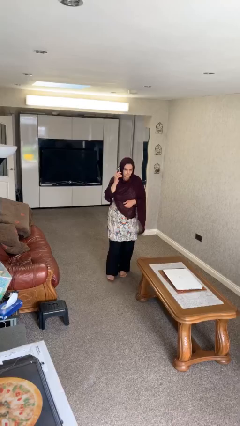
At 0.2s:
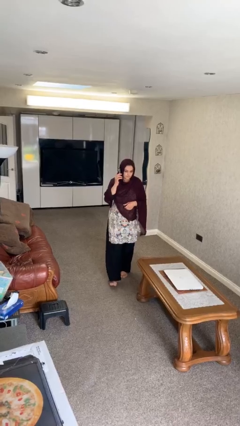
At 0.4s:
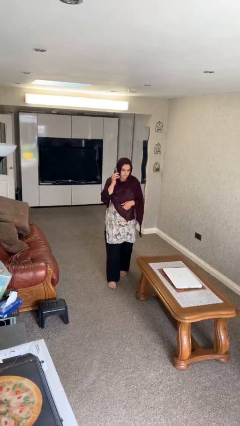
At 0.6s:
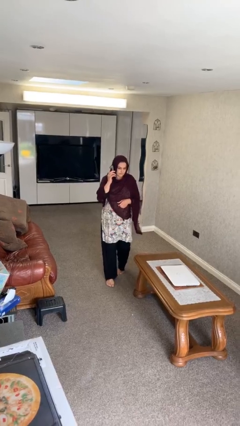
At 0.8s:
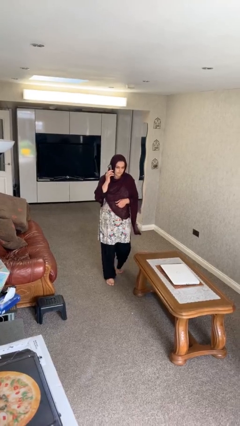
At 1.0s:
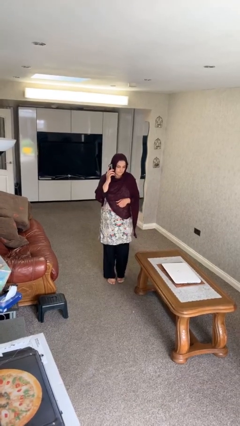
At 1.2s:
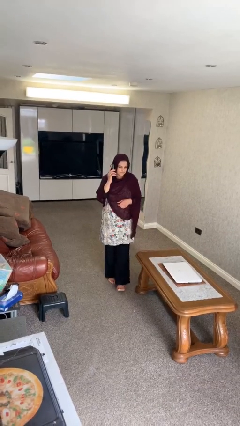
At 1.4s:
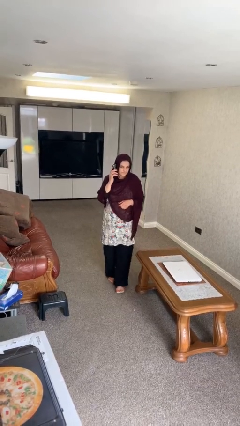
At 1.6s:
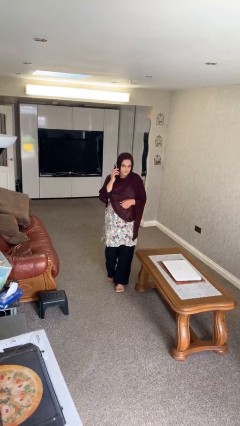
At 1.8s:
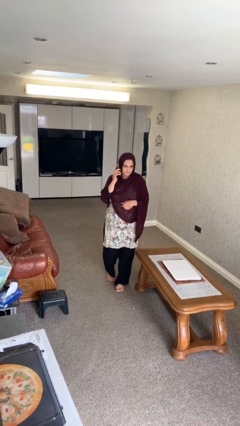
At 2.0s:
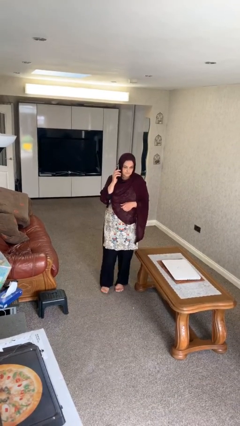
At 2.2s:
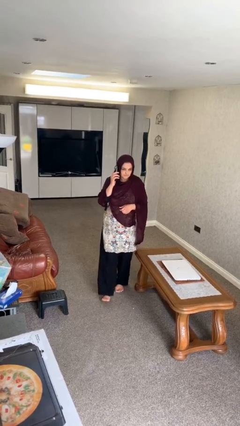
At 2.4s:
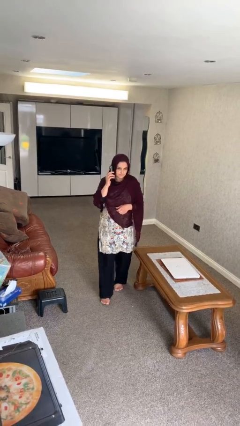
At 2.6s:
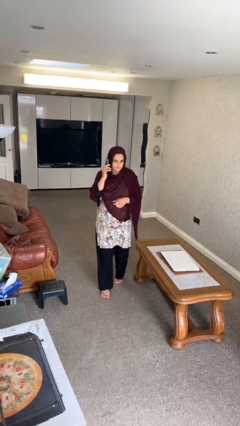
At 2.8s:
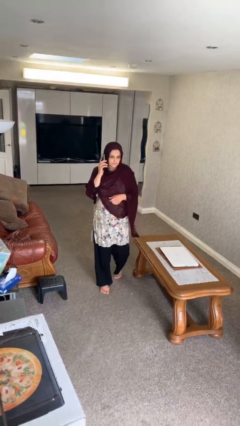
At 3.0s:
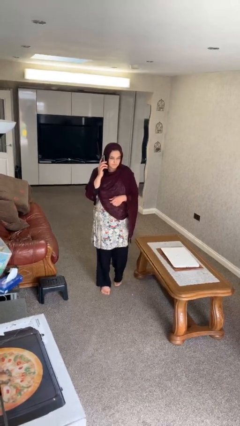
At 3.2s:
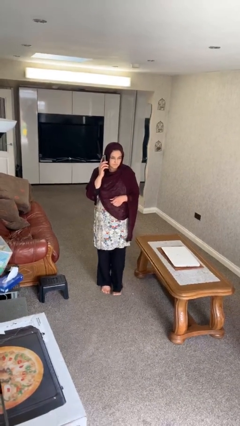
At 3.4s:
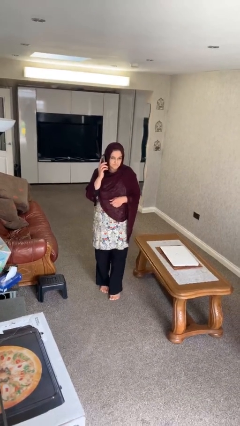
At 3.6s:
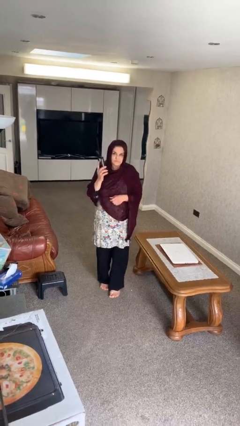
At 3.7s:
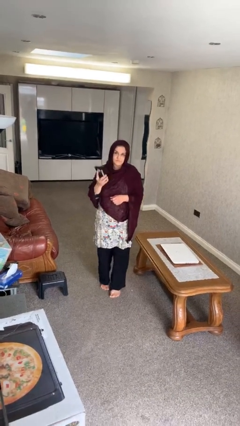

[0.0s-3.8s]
person talks on phone

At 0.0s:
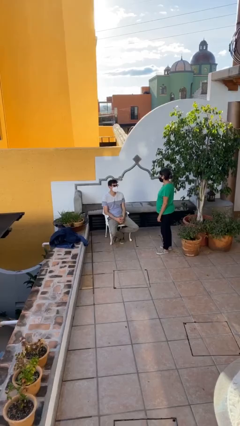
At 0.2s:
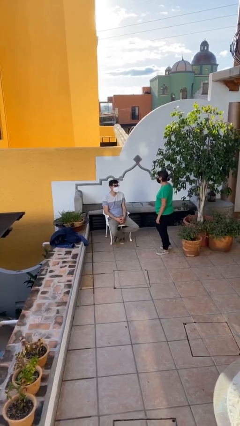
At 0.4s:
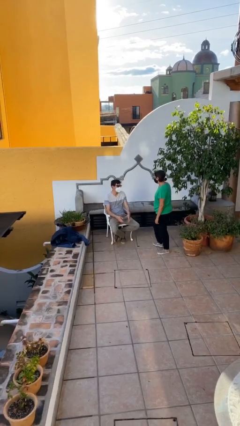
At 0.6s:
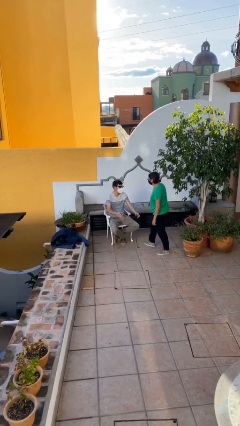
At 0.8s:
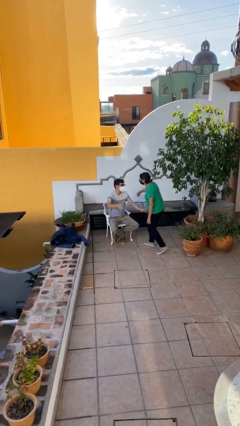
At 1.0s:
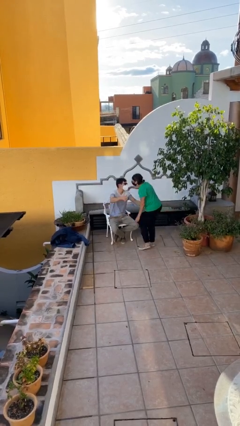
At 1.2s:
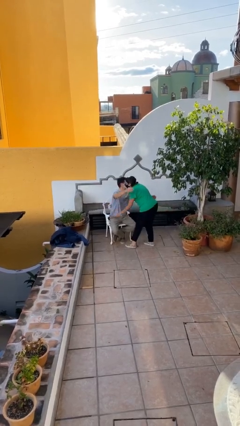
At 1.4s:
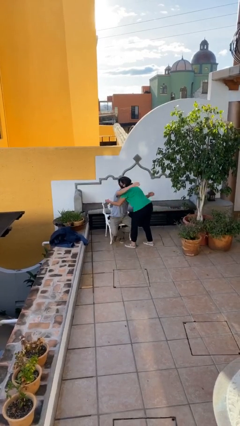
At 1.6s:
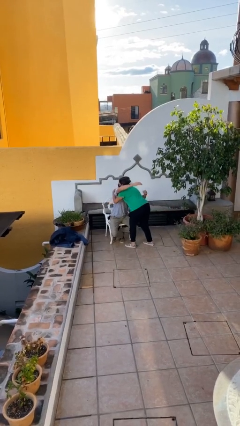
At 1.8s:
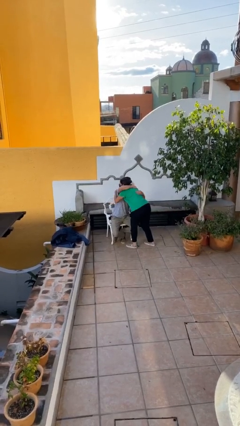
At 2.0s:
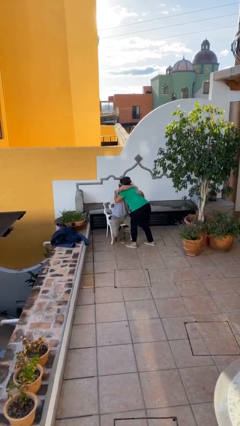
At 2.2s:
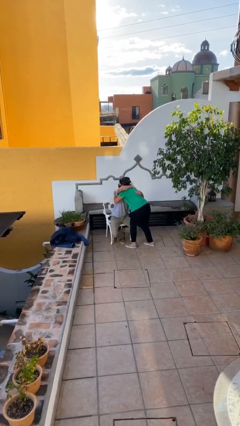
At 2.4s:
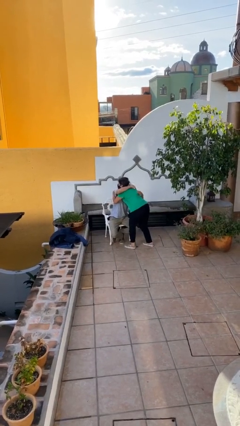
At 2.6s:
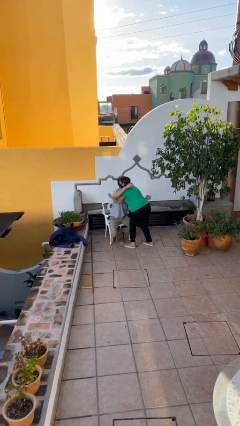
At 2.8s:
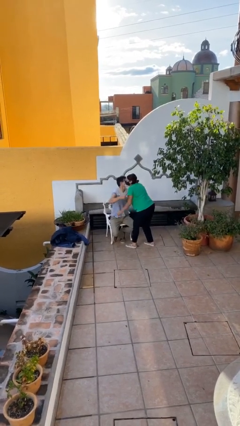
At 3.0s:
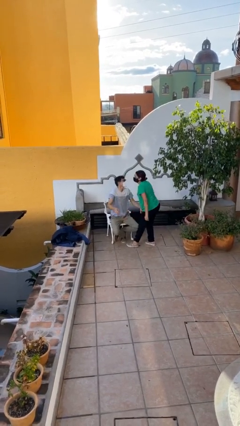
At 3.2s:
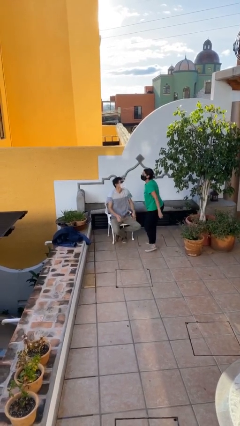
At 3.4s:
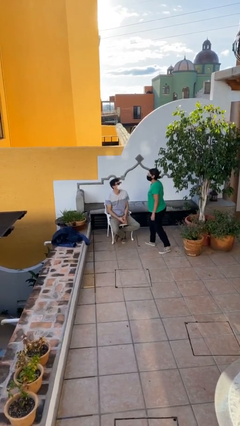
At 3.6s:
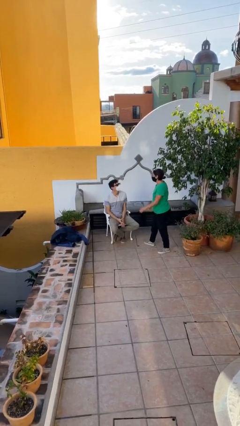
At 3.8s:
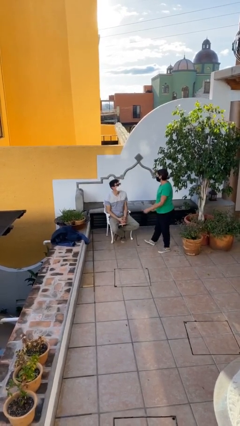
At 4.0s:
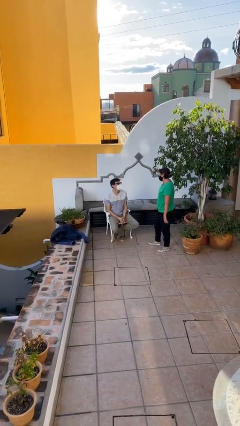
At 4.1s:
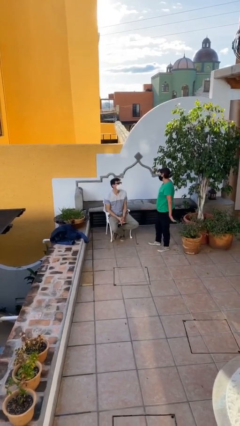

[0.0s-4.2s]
person embraces person

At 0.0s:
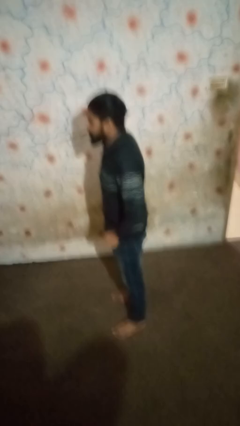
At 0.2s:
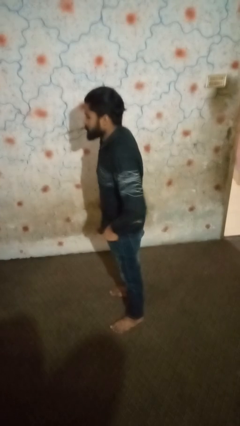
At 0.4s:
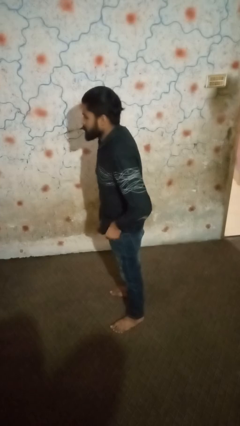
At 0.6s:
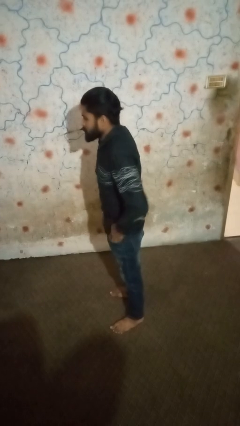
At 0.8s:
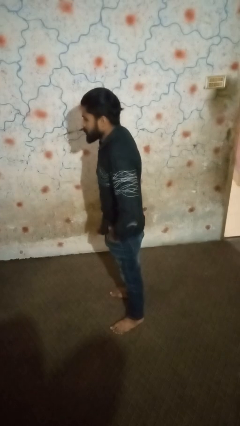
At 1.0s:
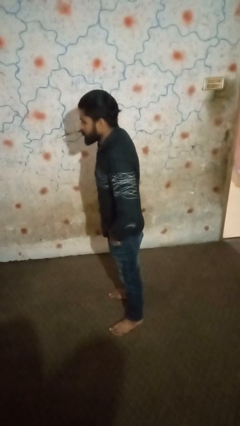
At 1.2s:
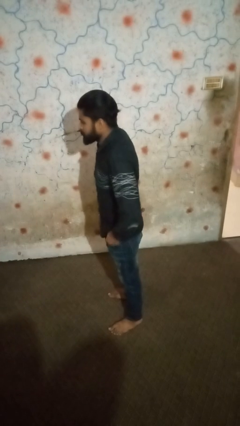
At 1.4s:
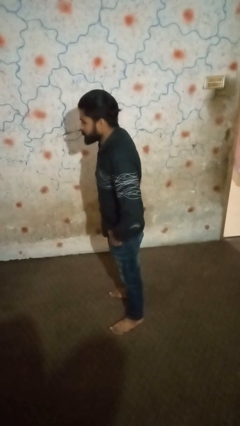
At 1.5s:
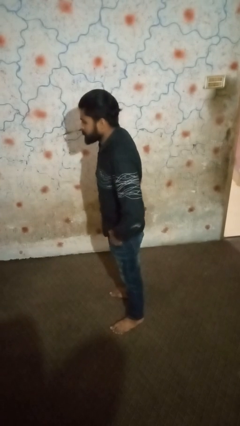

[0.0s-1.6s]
person puts hands in back pockets

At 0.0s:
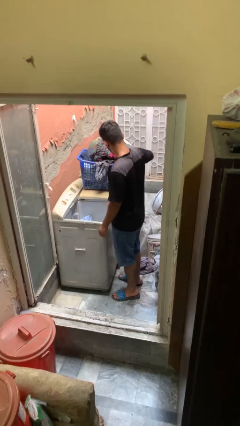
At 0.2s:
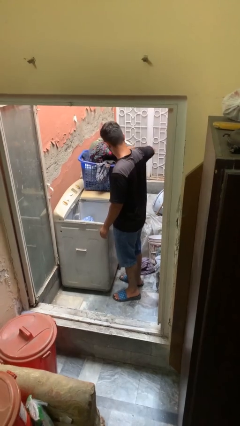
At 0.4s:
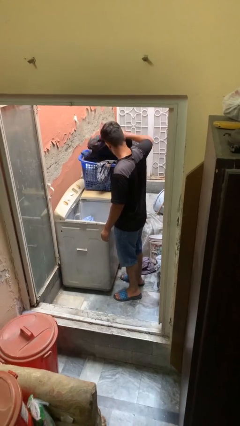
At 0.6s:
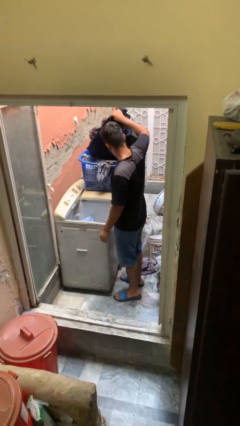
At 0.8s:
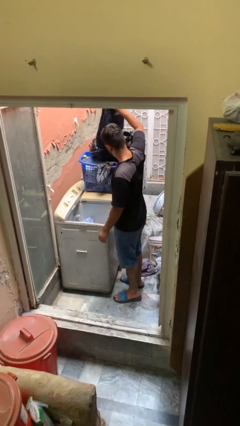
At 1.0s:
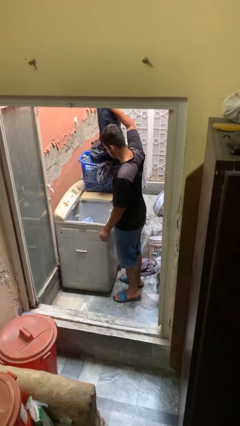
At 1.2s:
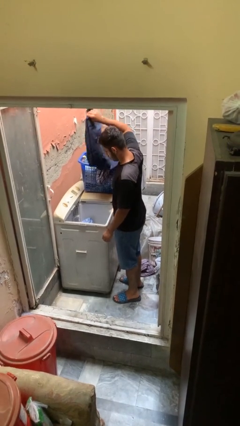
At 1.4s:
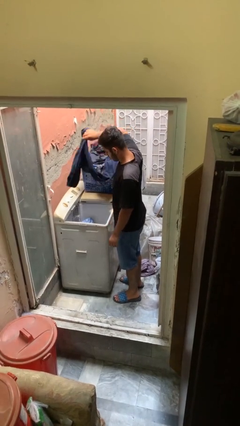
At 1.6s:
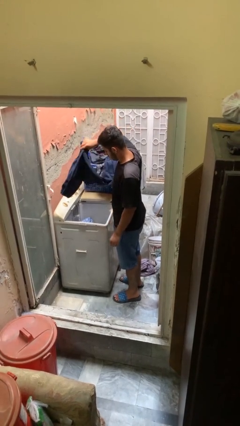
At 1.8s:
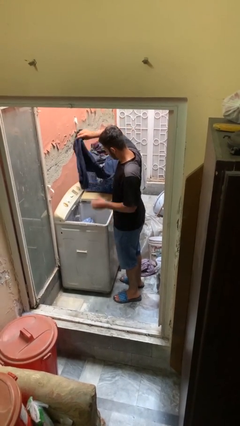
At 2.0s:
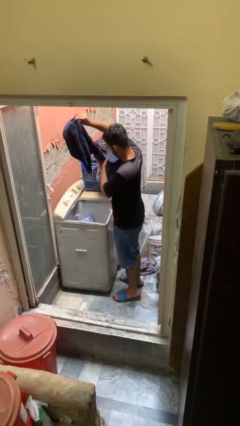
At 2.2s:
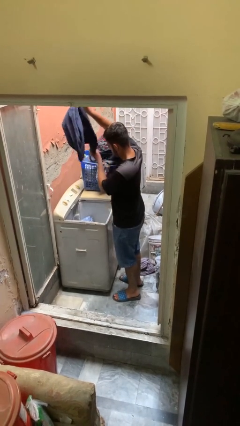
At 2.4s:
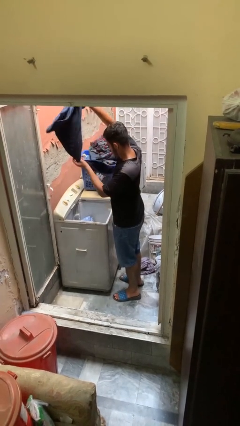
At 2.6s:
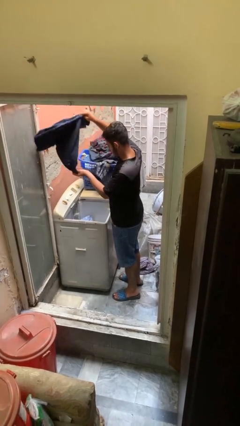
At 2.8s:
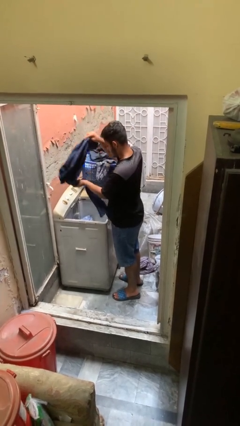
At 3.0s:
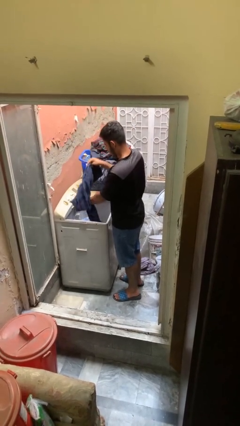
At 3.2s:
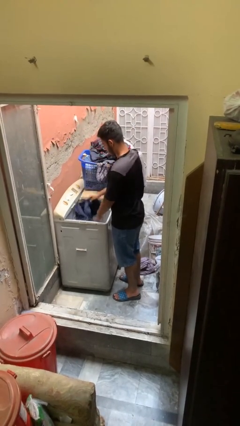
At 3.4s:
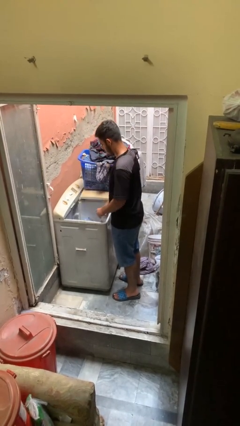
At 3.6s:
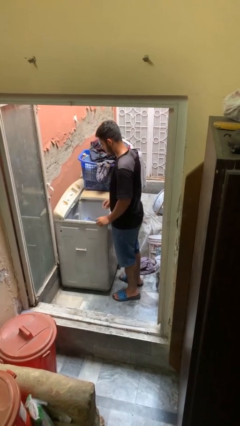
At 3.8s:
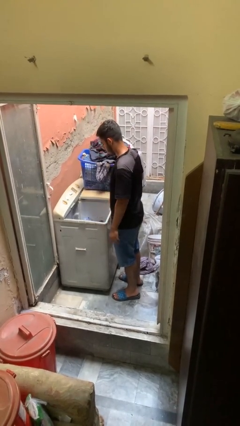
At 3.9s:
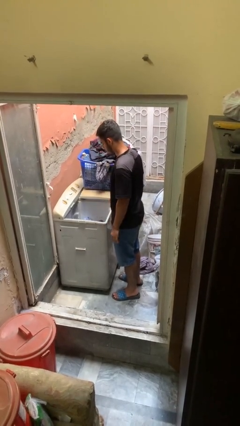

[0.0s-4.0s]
person loads clotheswasher

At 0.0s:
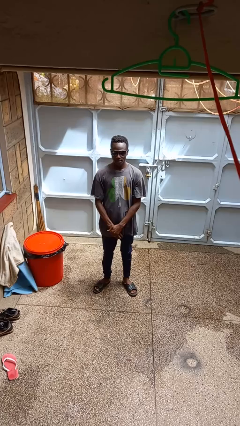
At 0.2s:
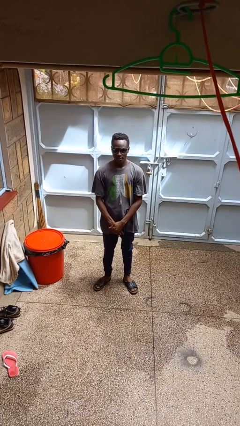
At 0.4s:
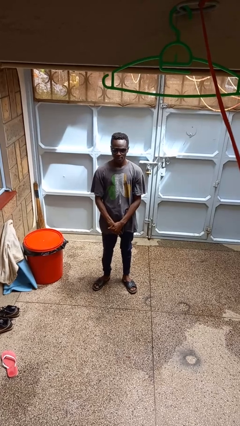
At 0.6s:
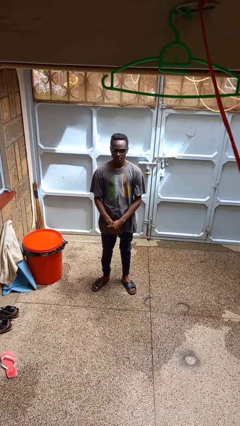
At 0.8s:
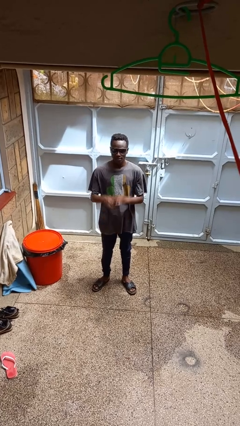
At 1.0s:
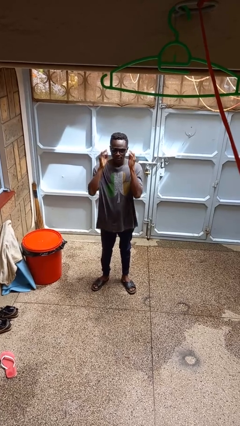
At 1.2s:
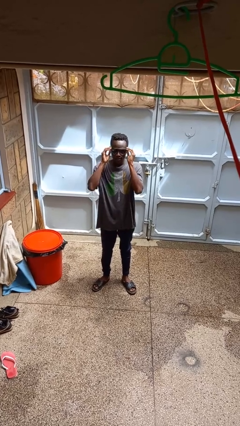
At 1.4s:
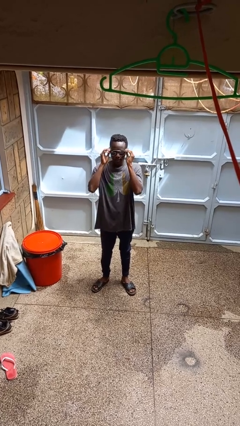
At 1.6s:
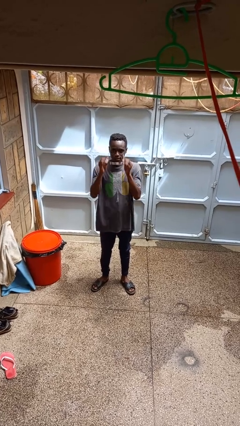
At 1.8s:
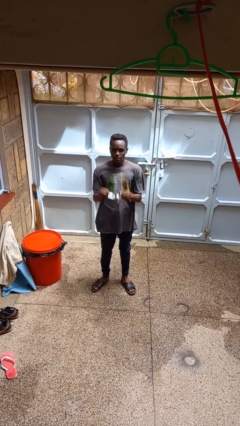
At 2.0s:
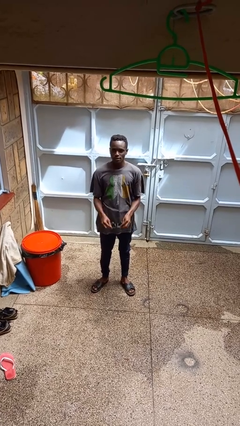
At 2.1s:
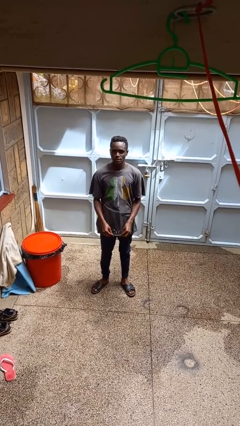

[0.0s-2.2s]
person takes off sunglasses

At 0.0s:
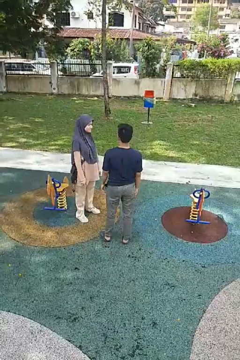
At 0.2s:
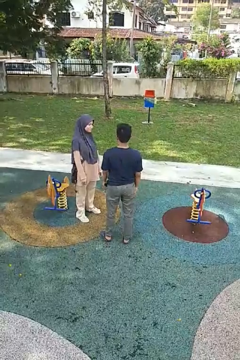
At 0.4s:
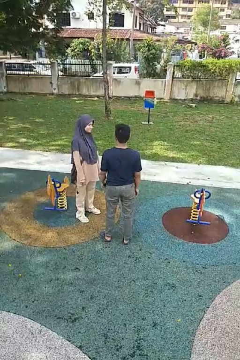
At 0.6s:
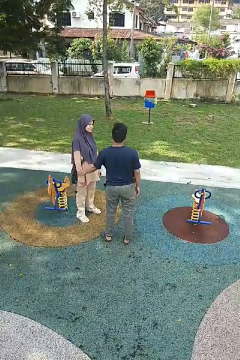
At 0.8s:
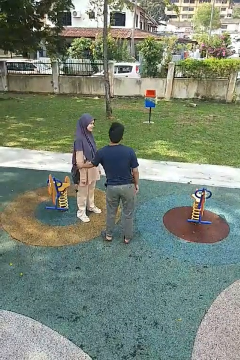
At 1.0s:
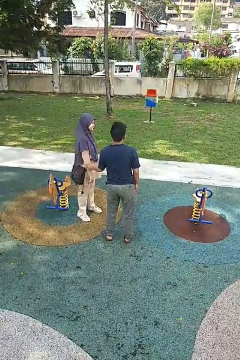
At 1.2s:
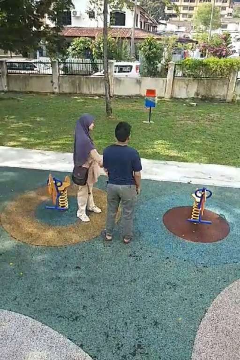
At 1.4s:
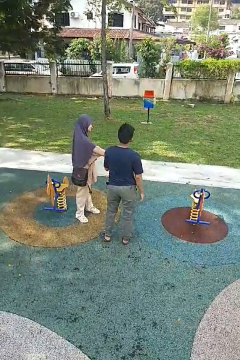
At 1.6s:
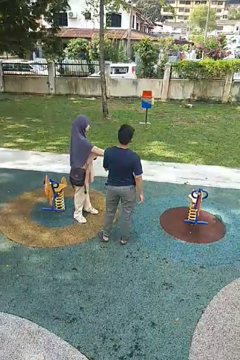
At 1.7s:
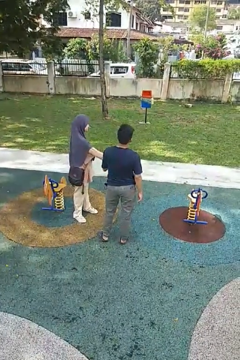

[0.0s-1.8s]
person grabs person by forearm

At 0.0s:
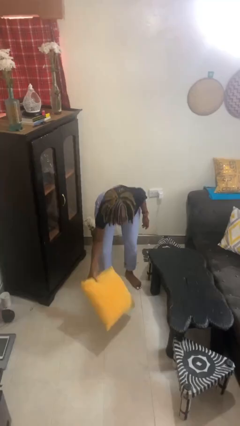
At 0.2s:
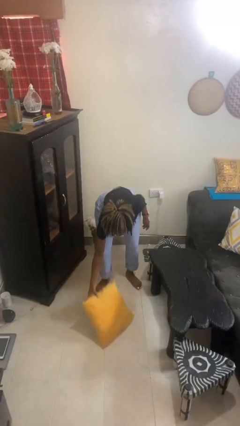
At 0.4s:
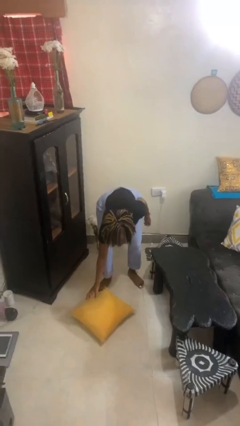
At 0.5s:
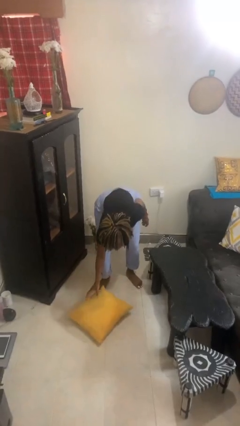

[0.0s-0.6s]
person catches dropped object
